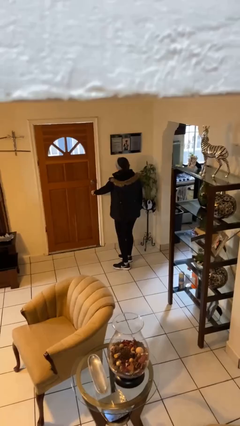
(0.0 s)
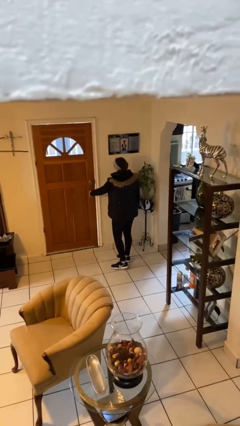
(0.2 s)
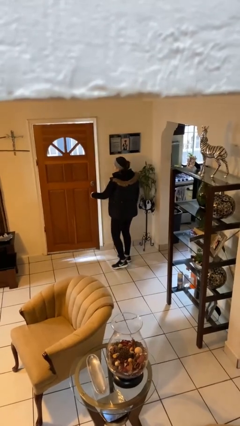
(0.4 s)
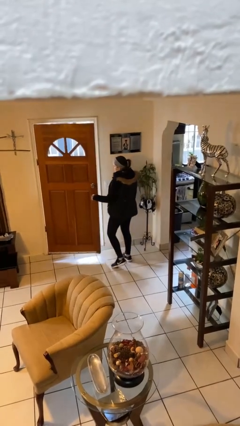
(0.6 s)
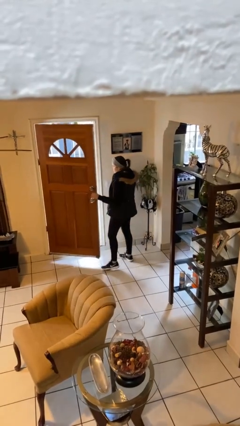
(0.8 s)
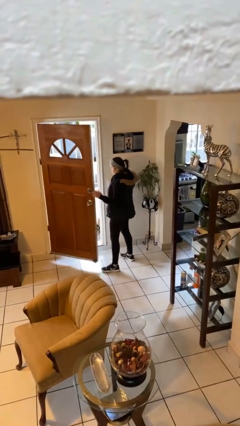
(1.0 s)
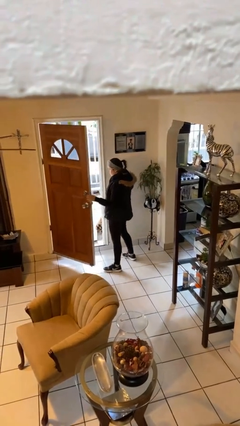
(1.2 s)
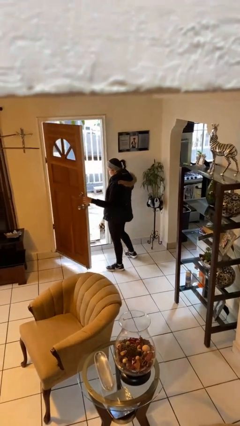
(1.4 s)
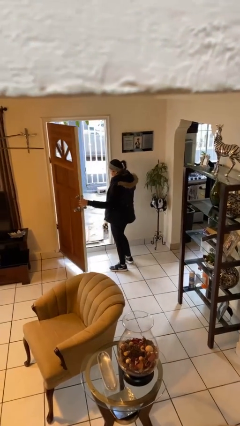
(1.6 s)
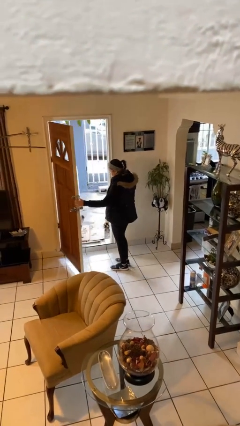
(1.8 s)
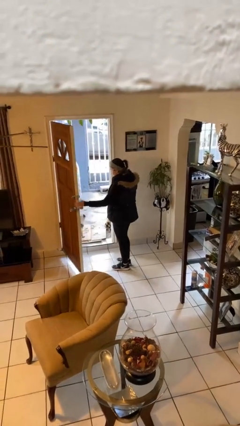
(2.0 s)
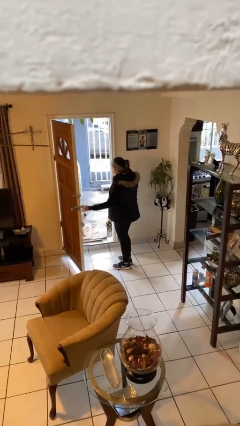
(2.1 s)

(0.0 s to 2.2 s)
person opens facility door

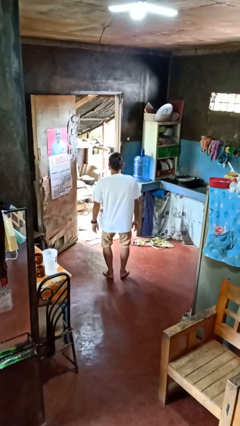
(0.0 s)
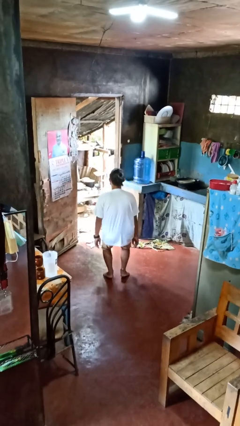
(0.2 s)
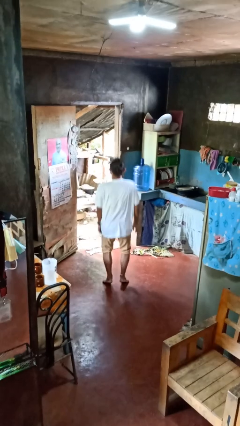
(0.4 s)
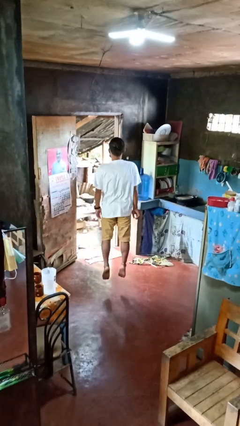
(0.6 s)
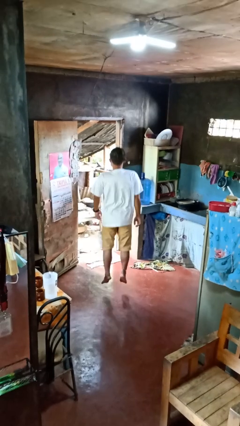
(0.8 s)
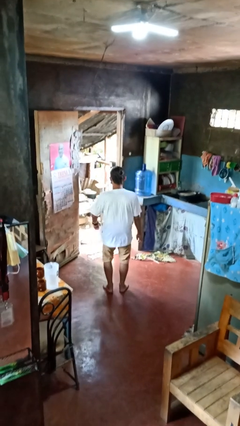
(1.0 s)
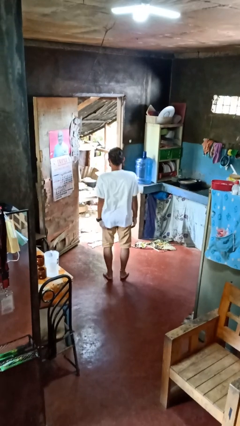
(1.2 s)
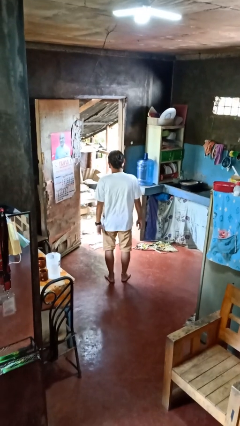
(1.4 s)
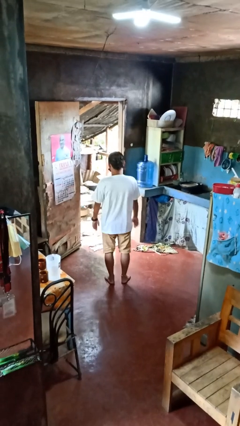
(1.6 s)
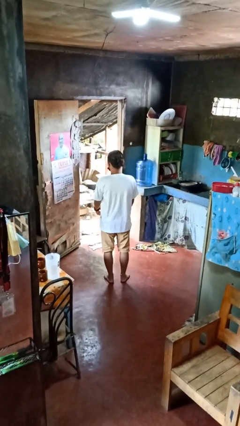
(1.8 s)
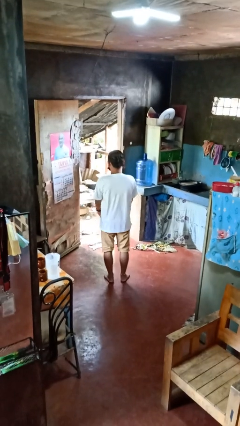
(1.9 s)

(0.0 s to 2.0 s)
person jumps

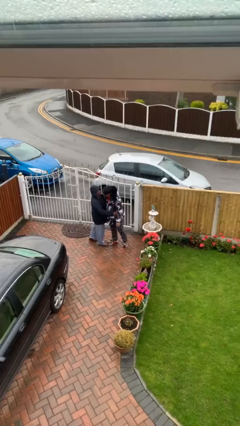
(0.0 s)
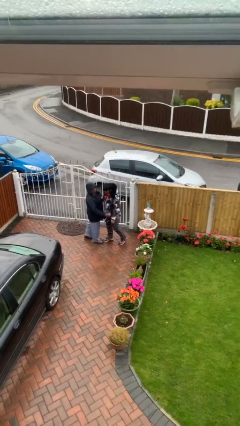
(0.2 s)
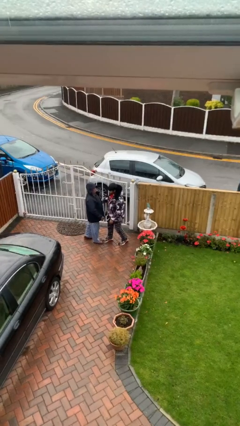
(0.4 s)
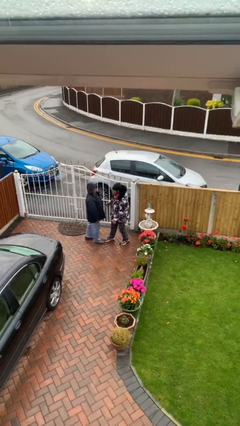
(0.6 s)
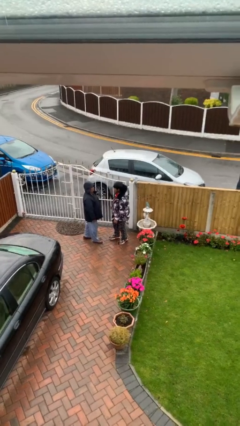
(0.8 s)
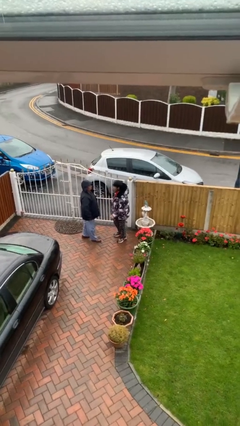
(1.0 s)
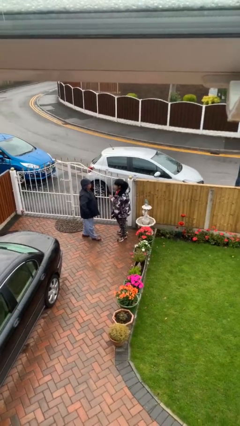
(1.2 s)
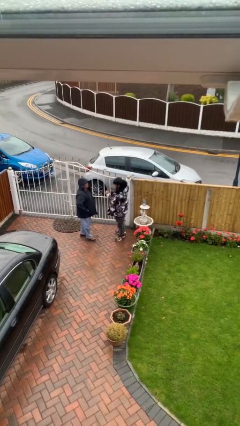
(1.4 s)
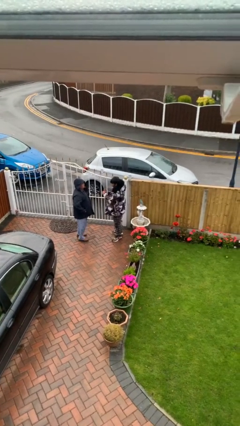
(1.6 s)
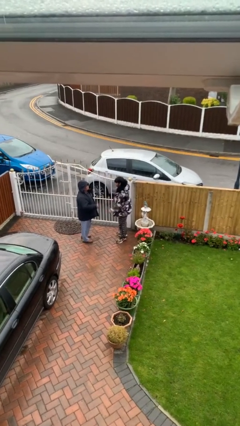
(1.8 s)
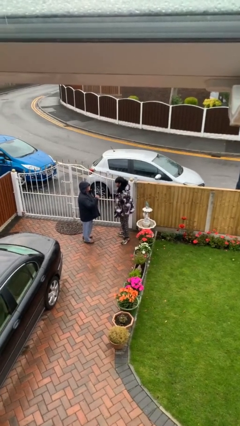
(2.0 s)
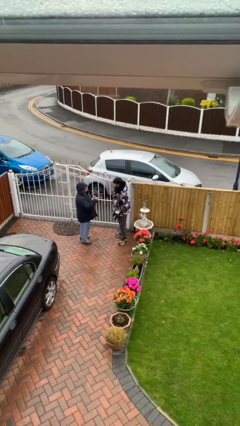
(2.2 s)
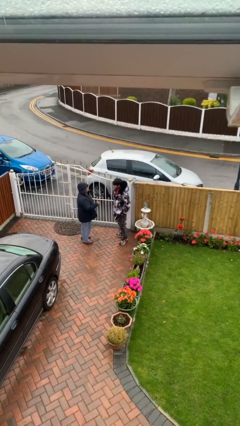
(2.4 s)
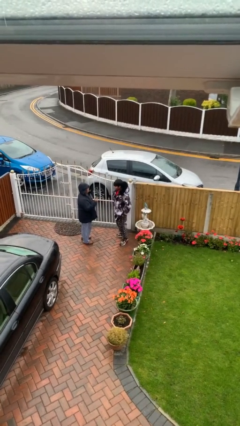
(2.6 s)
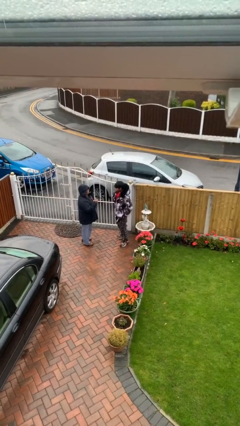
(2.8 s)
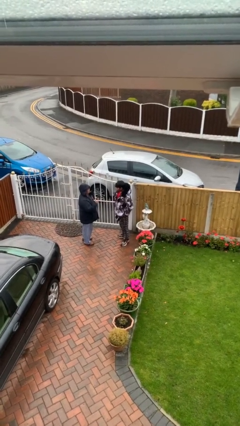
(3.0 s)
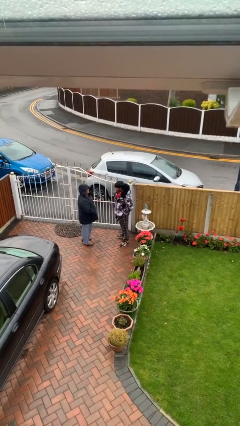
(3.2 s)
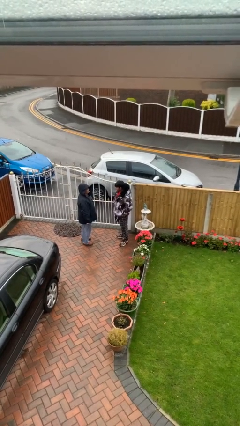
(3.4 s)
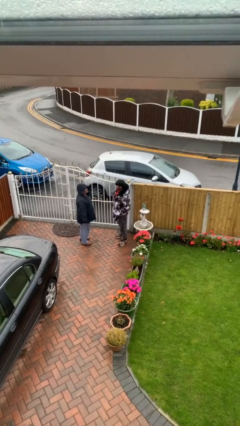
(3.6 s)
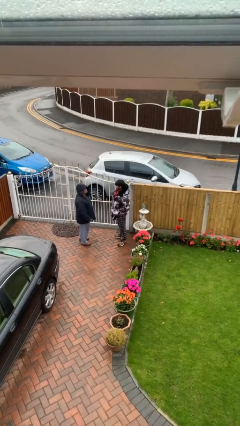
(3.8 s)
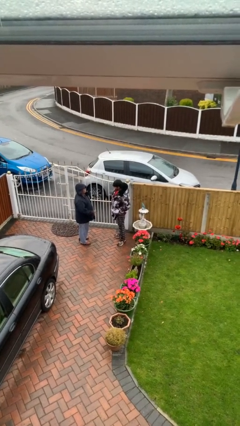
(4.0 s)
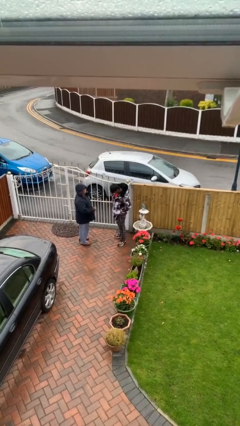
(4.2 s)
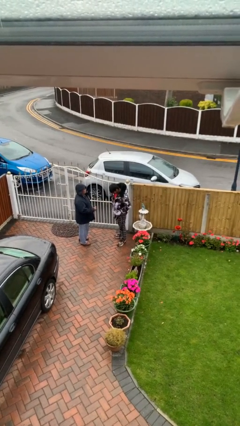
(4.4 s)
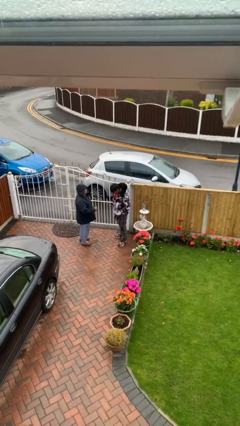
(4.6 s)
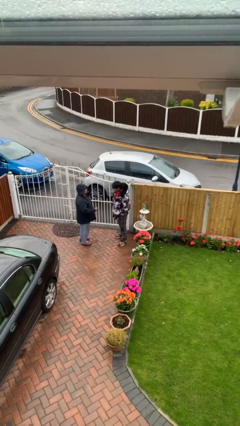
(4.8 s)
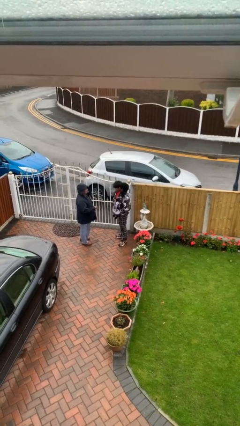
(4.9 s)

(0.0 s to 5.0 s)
person talks to person

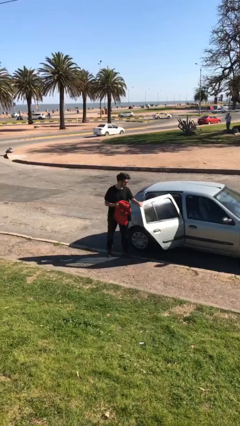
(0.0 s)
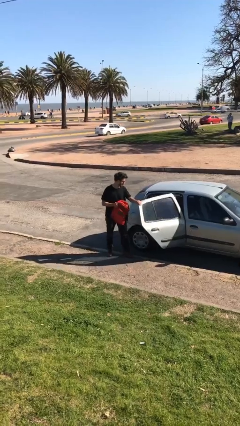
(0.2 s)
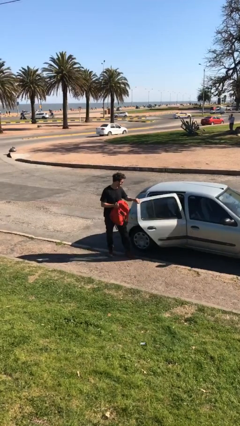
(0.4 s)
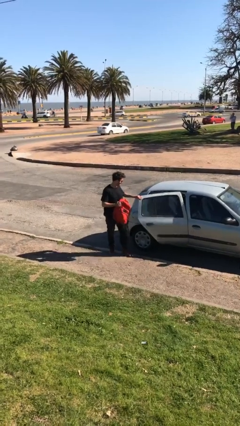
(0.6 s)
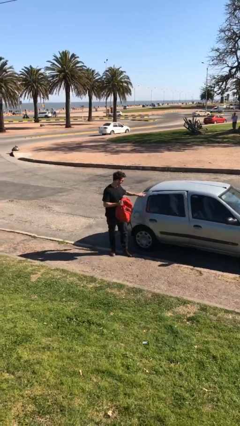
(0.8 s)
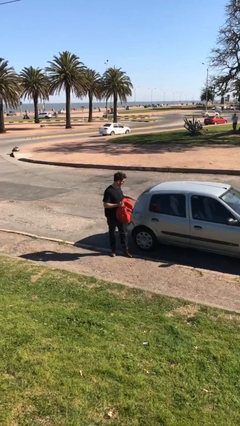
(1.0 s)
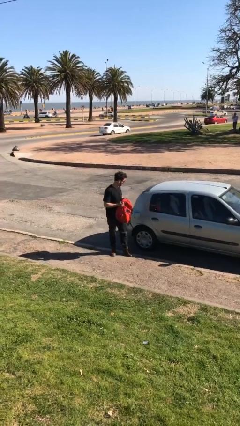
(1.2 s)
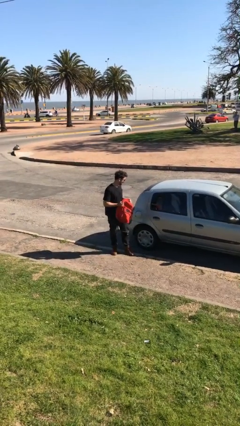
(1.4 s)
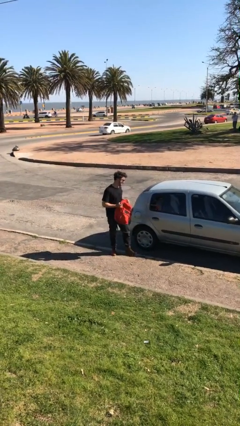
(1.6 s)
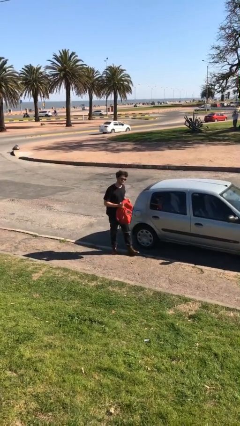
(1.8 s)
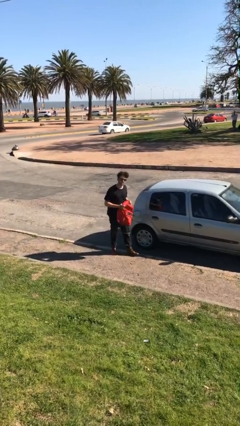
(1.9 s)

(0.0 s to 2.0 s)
person closes car door

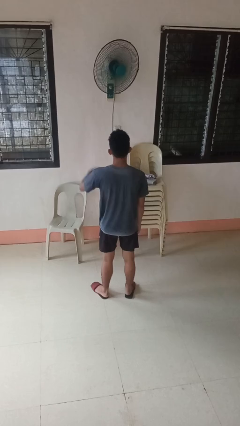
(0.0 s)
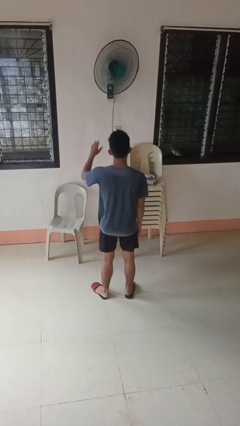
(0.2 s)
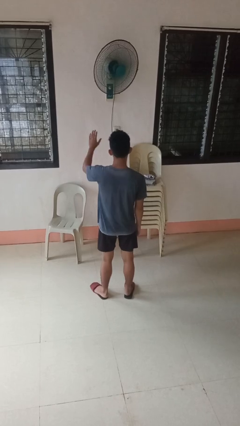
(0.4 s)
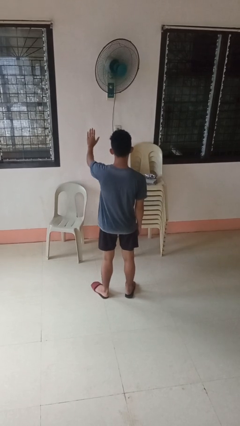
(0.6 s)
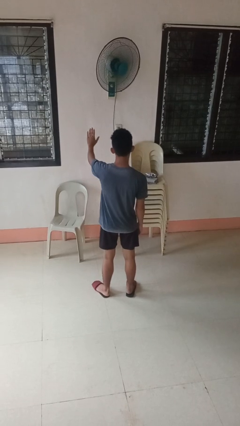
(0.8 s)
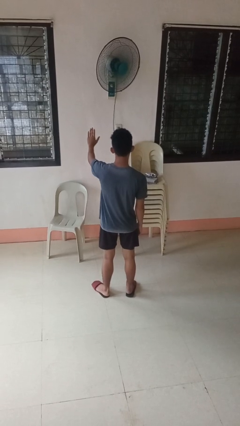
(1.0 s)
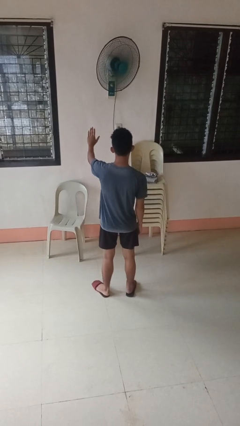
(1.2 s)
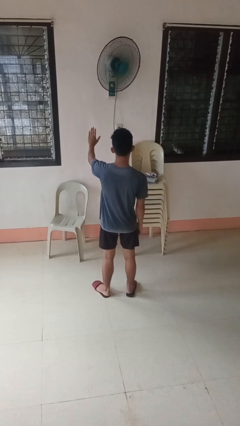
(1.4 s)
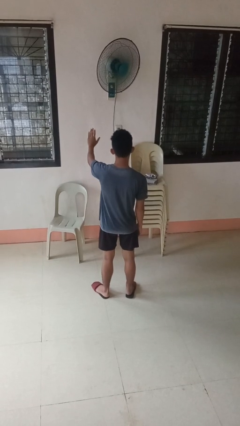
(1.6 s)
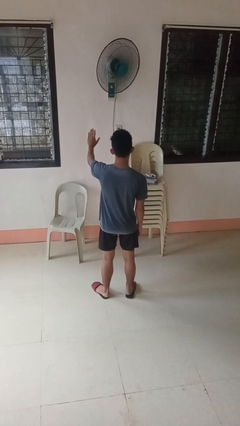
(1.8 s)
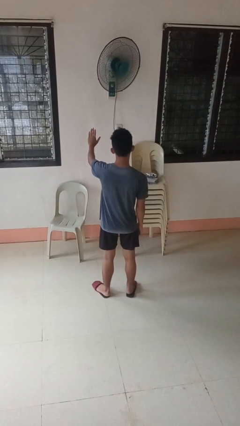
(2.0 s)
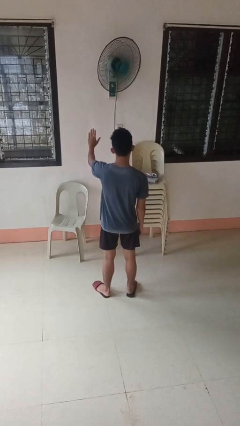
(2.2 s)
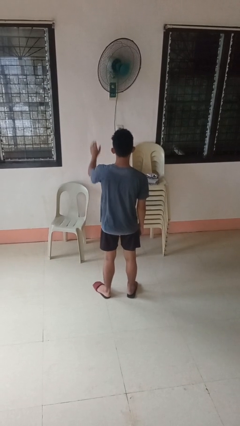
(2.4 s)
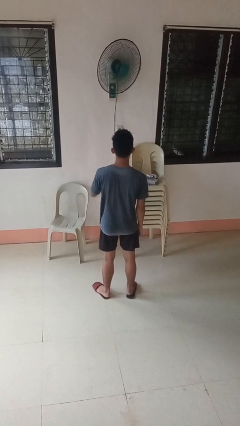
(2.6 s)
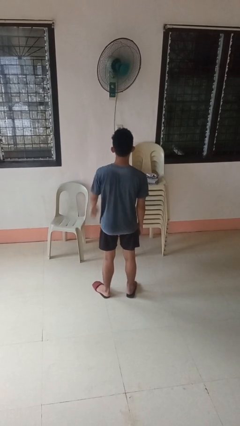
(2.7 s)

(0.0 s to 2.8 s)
person gestures stop

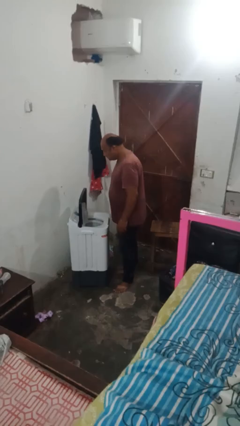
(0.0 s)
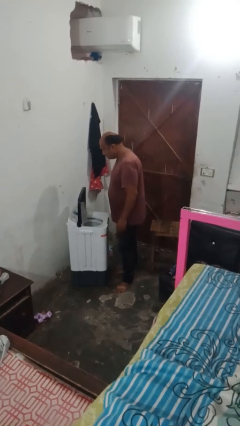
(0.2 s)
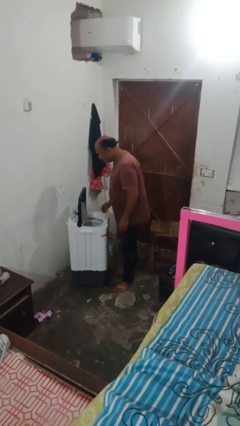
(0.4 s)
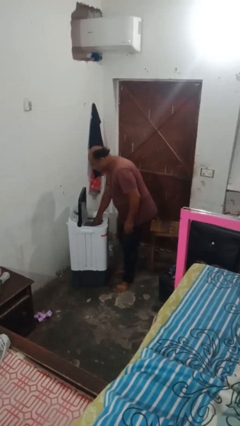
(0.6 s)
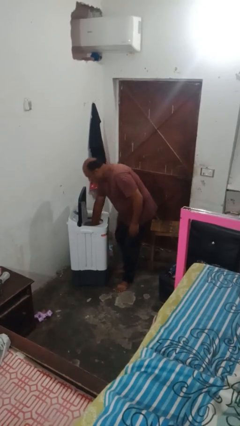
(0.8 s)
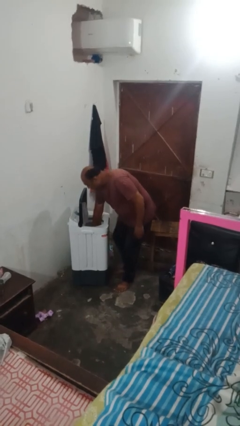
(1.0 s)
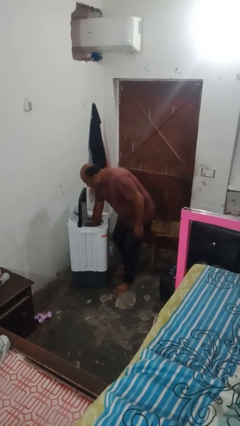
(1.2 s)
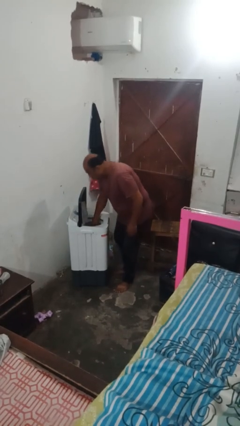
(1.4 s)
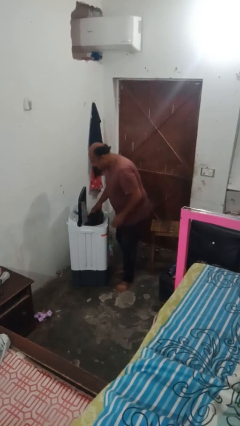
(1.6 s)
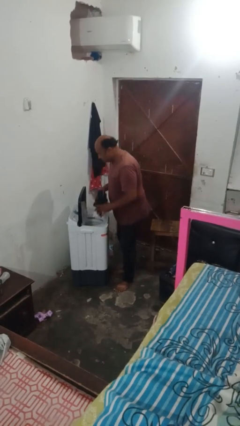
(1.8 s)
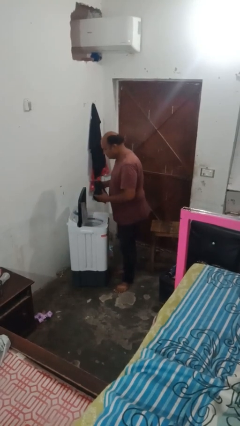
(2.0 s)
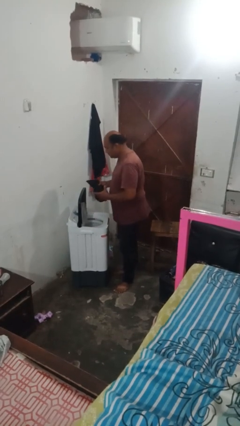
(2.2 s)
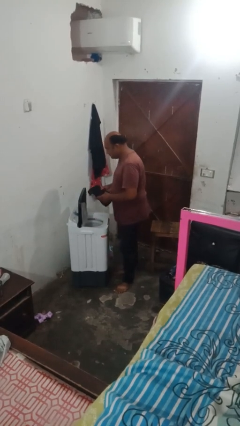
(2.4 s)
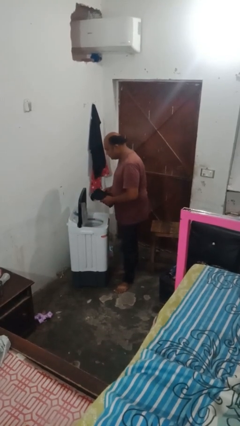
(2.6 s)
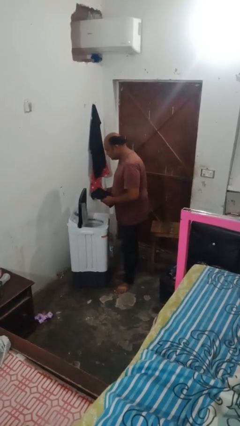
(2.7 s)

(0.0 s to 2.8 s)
person unloads clotheswasher

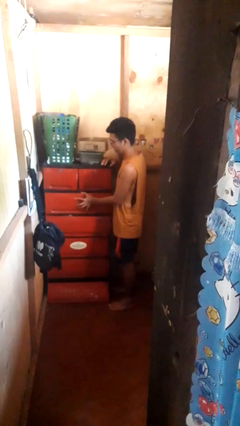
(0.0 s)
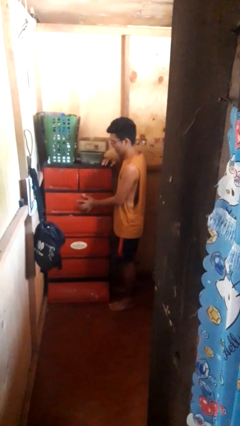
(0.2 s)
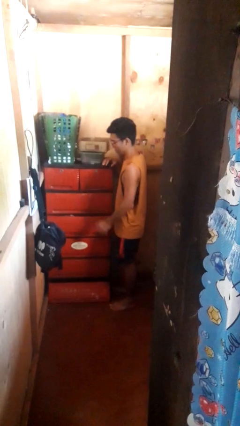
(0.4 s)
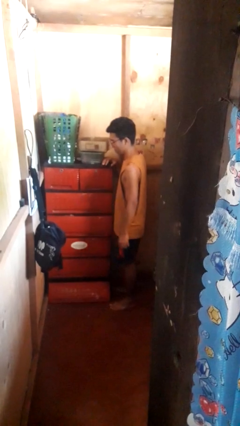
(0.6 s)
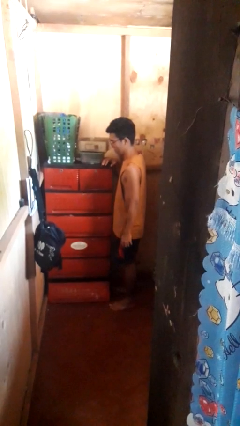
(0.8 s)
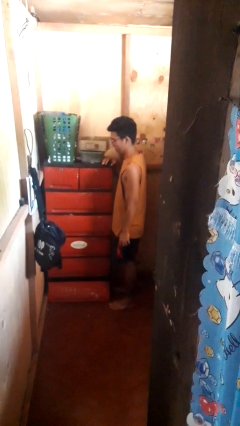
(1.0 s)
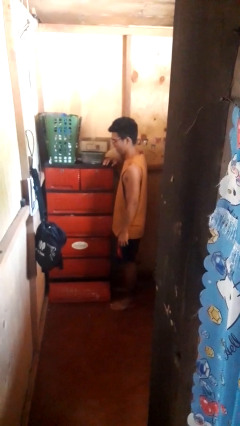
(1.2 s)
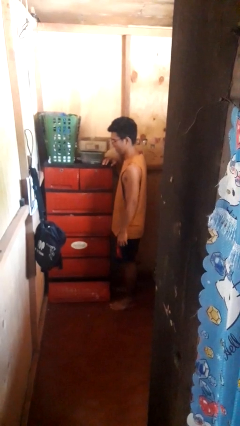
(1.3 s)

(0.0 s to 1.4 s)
person closes dresser drawer
